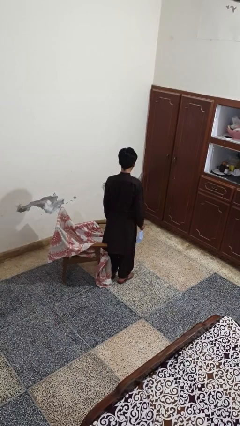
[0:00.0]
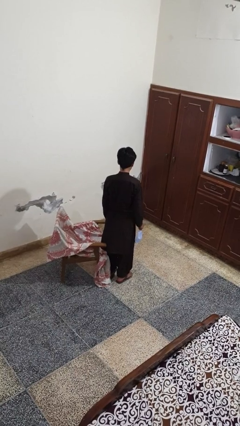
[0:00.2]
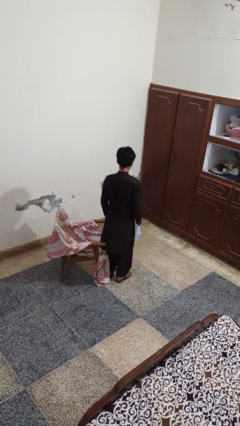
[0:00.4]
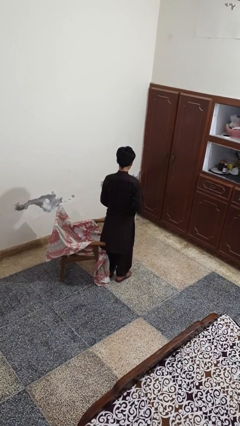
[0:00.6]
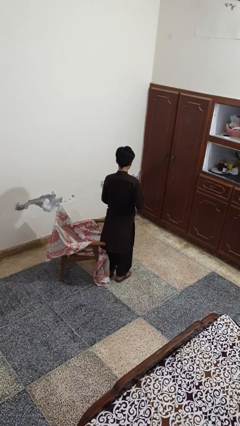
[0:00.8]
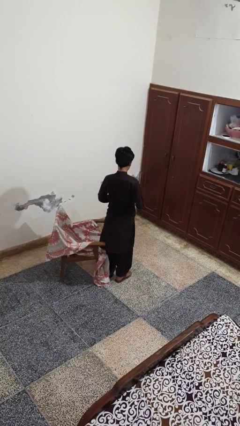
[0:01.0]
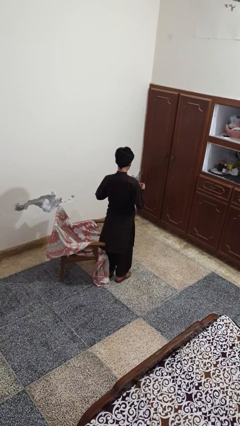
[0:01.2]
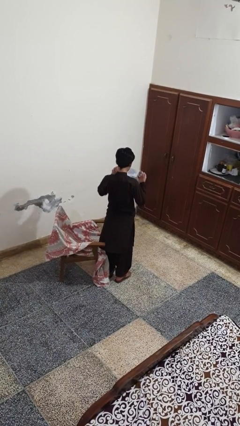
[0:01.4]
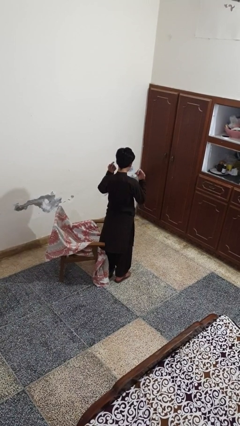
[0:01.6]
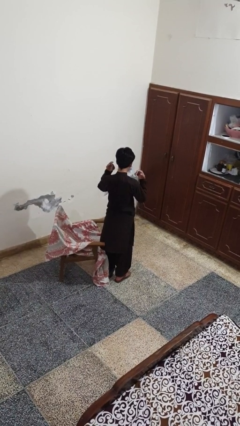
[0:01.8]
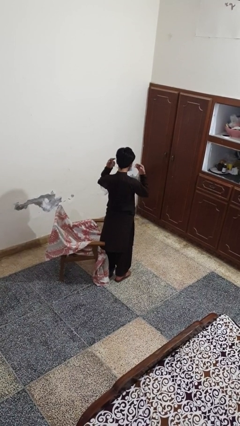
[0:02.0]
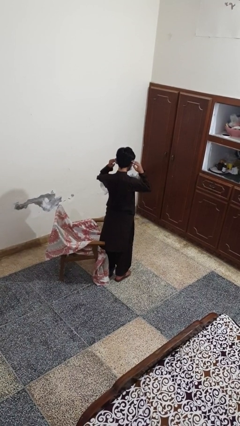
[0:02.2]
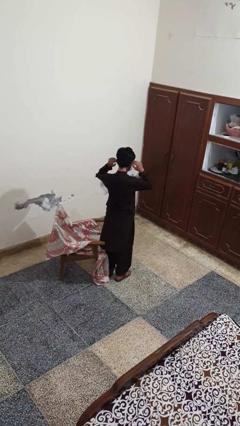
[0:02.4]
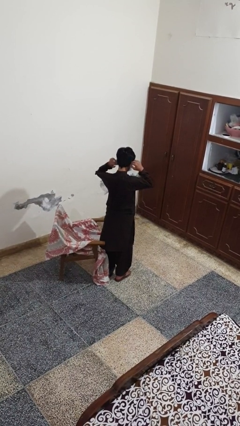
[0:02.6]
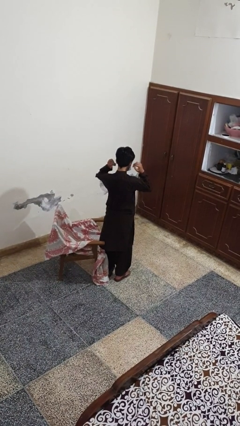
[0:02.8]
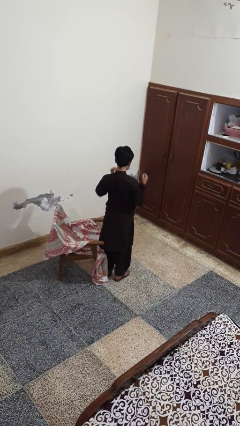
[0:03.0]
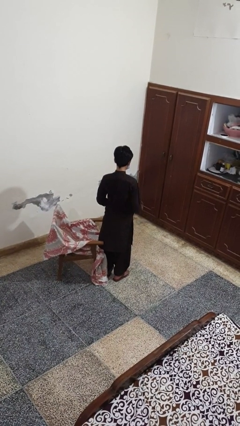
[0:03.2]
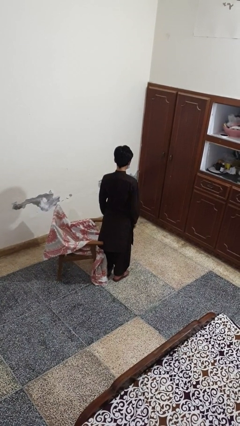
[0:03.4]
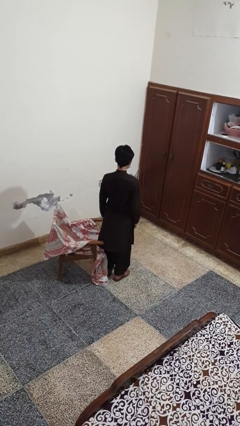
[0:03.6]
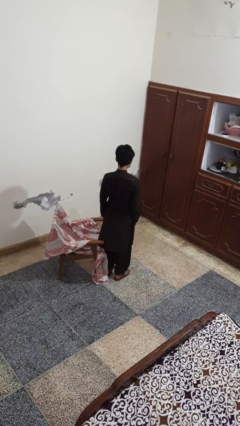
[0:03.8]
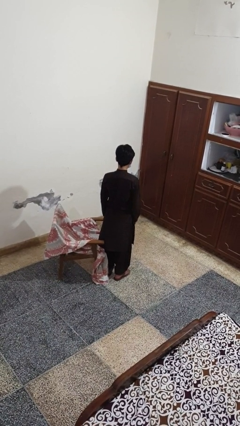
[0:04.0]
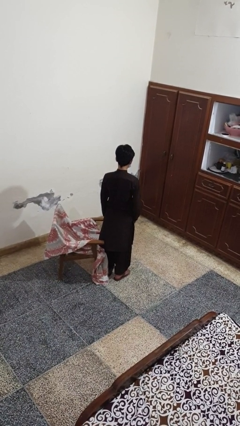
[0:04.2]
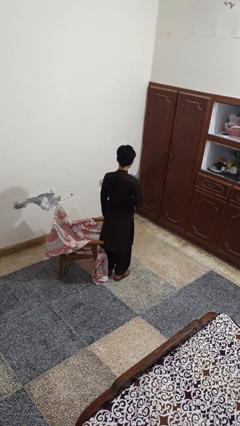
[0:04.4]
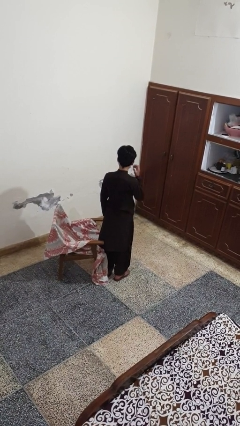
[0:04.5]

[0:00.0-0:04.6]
person puts on facemask

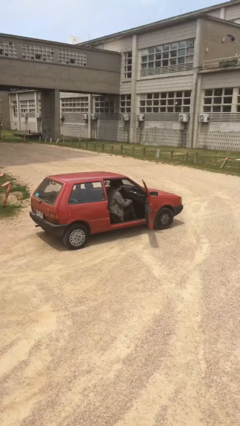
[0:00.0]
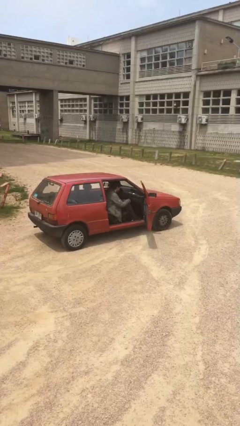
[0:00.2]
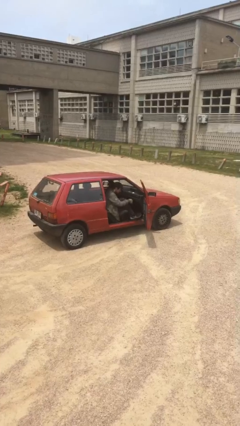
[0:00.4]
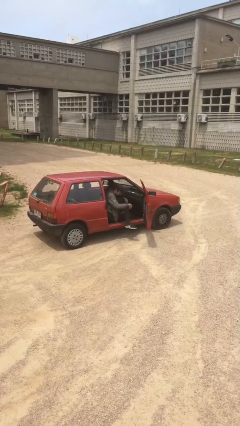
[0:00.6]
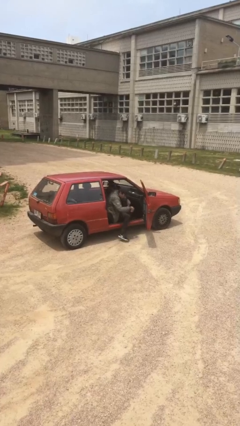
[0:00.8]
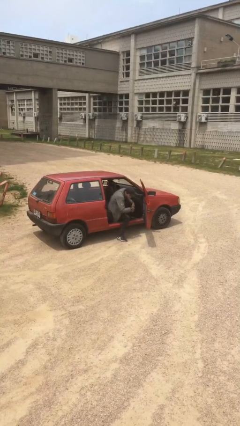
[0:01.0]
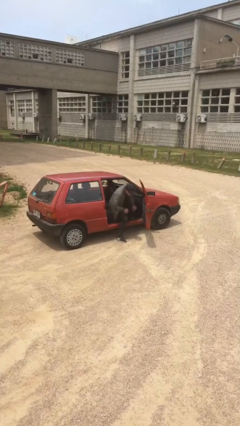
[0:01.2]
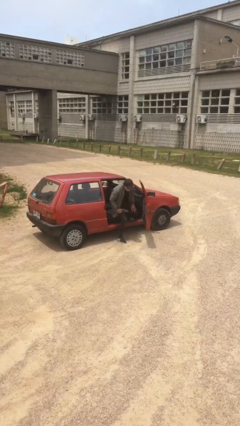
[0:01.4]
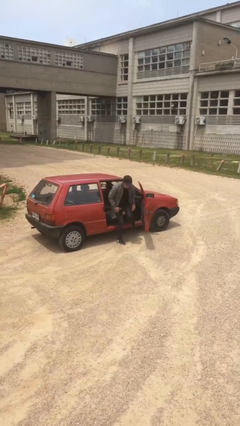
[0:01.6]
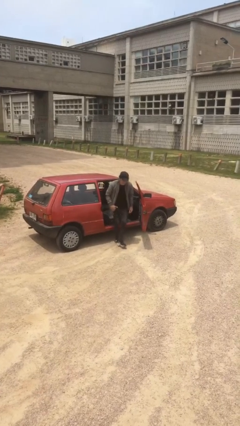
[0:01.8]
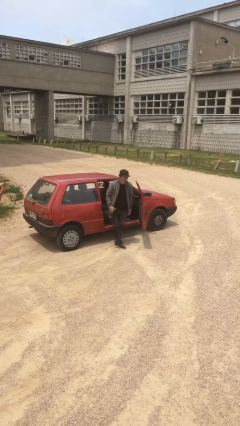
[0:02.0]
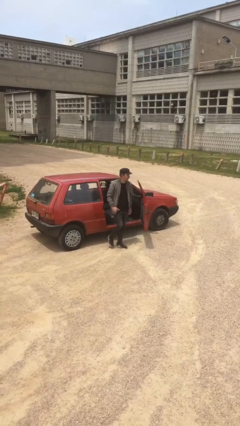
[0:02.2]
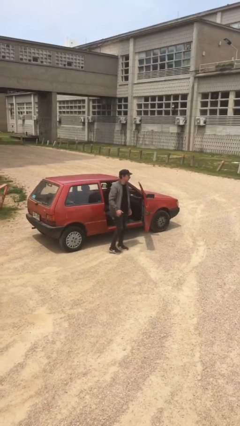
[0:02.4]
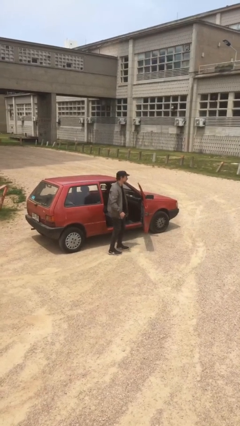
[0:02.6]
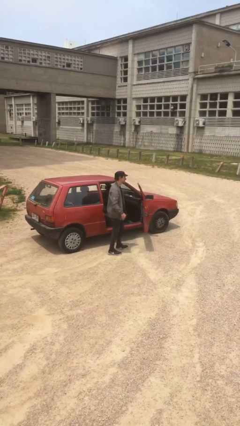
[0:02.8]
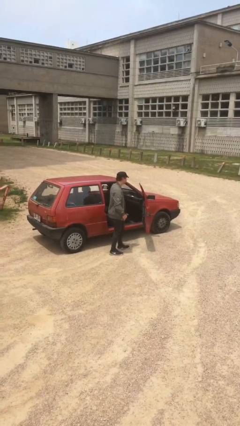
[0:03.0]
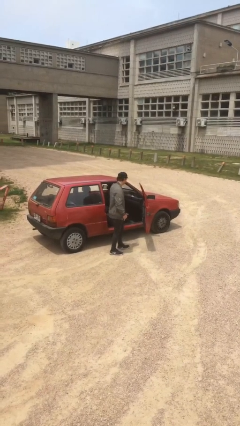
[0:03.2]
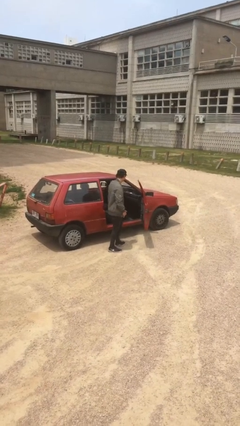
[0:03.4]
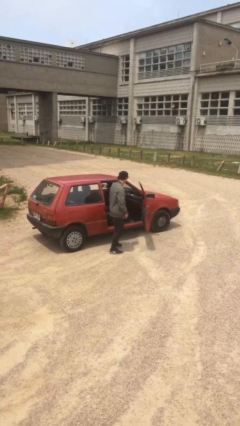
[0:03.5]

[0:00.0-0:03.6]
person exits car

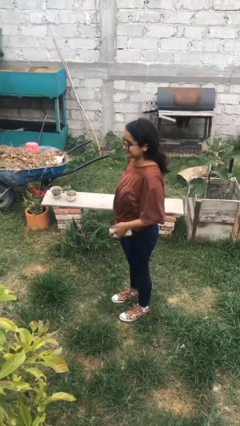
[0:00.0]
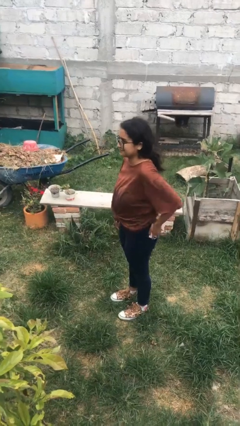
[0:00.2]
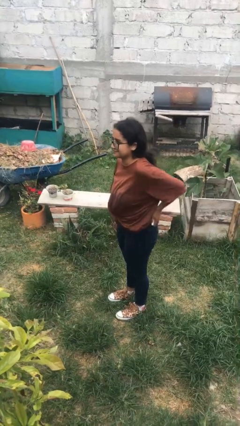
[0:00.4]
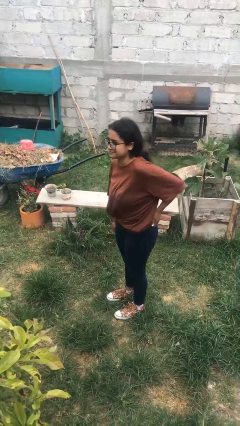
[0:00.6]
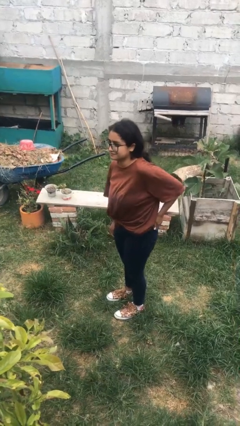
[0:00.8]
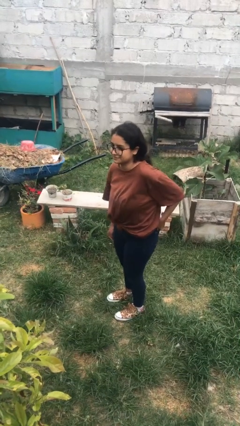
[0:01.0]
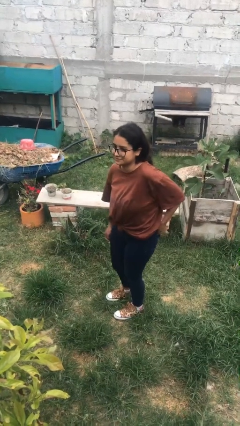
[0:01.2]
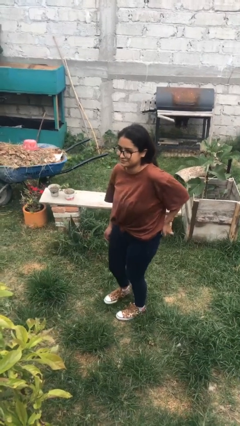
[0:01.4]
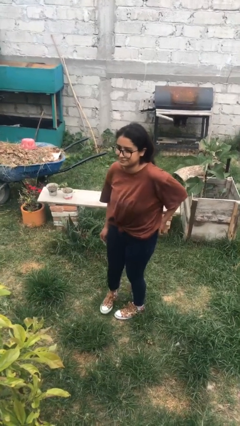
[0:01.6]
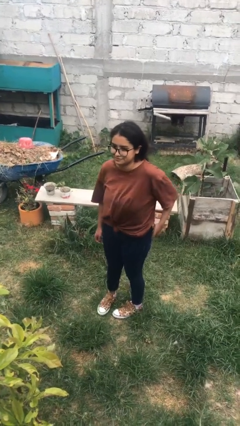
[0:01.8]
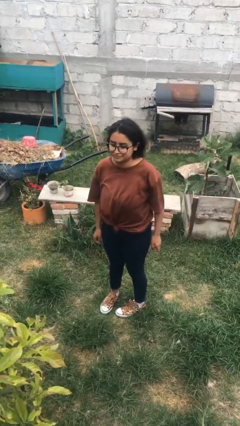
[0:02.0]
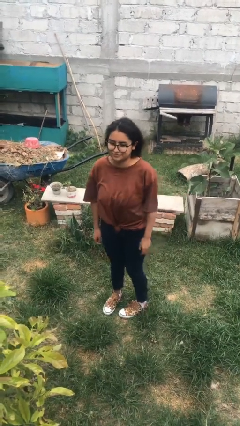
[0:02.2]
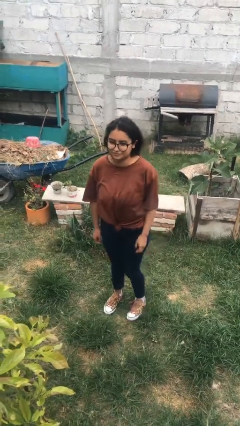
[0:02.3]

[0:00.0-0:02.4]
person puts phone into pocket

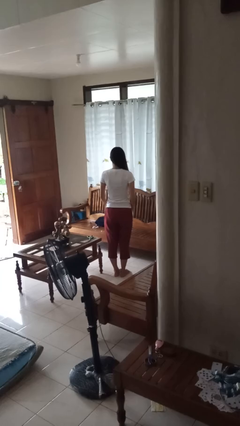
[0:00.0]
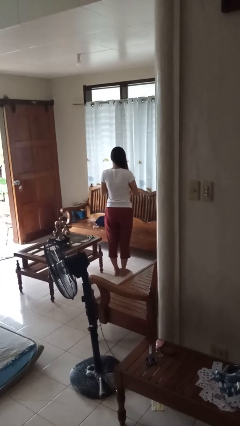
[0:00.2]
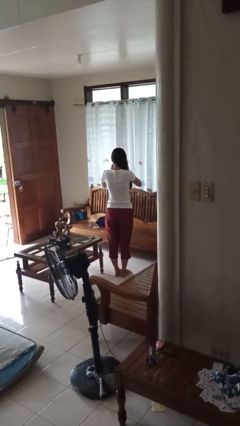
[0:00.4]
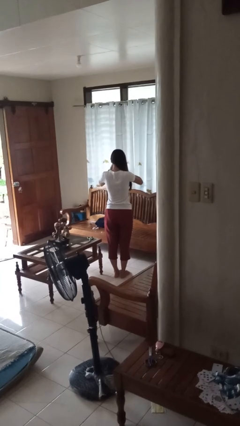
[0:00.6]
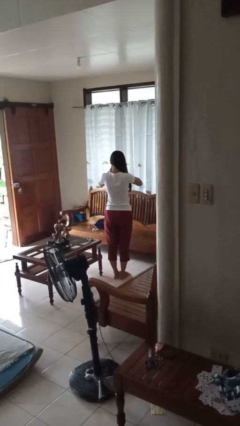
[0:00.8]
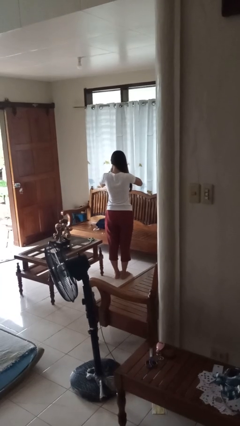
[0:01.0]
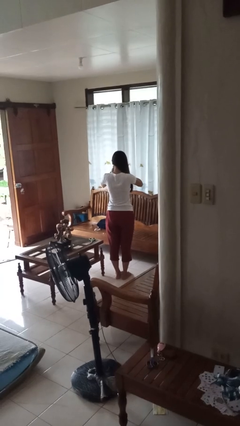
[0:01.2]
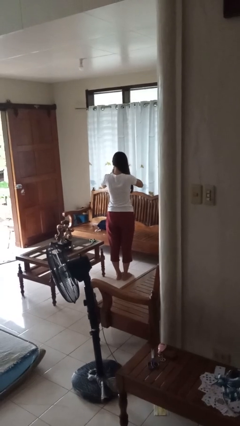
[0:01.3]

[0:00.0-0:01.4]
person covers face with hands

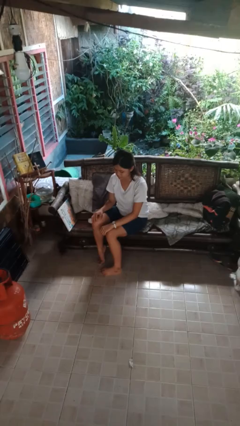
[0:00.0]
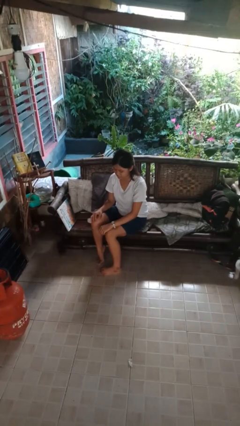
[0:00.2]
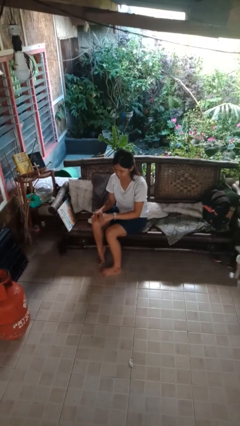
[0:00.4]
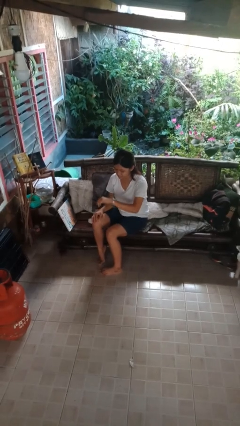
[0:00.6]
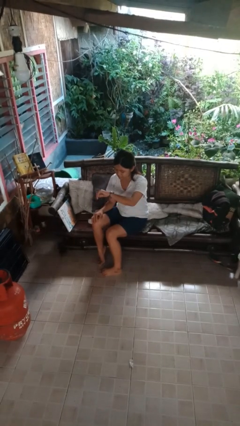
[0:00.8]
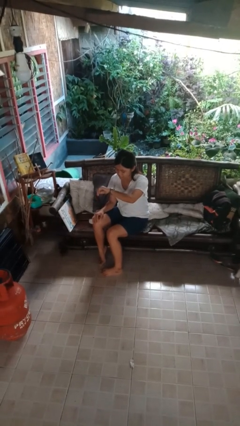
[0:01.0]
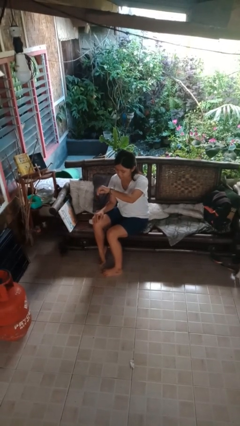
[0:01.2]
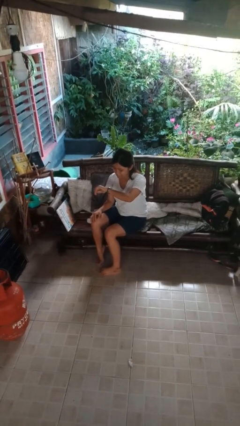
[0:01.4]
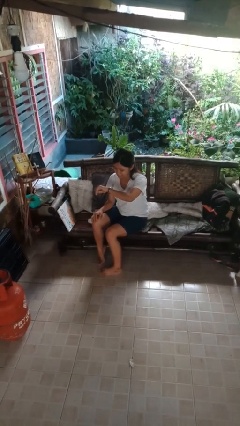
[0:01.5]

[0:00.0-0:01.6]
person looks at wristwatch

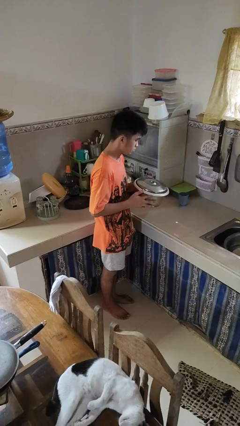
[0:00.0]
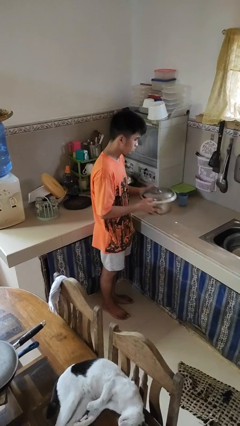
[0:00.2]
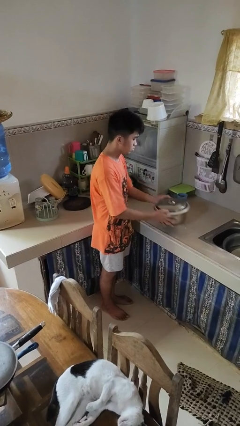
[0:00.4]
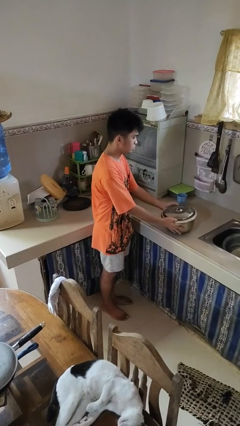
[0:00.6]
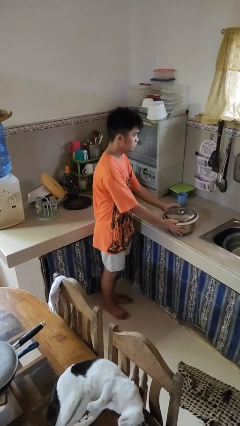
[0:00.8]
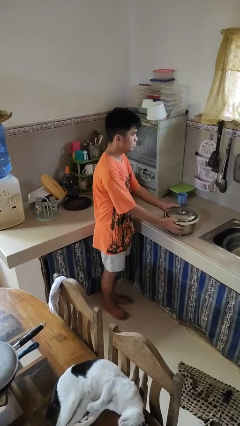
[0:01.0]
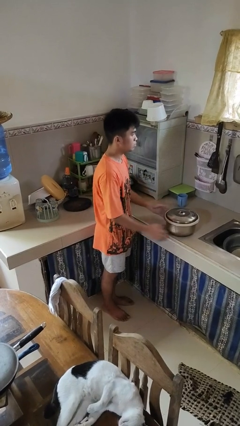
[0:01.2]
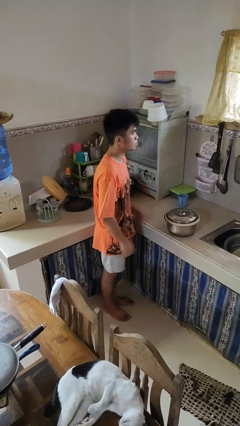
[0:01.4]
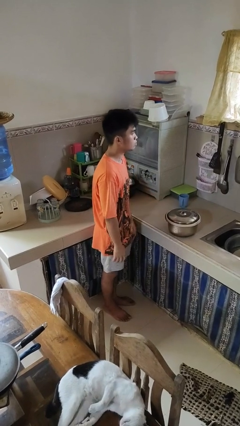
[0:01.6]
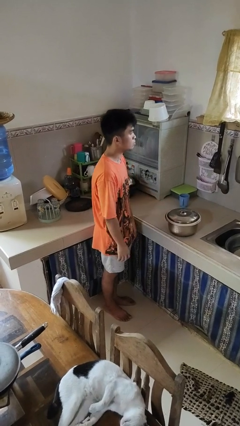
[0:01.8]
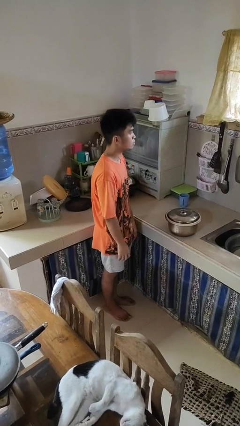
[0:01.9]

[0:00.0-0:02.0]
person puts down object on countertop

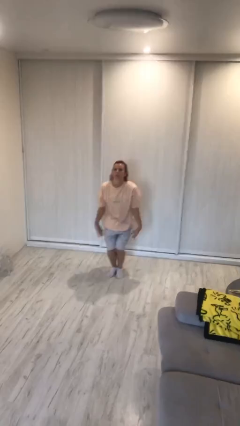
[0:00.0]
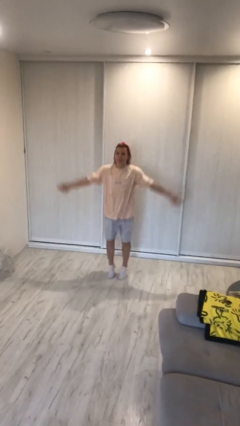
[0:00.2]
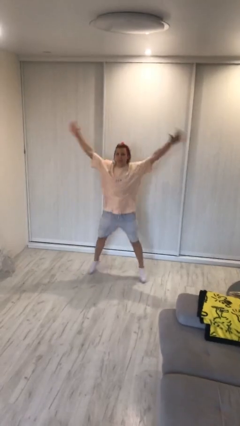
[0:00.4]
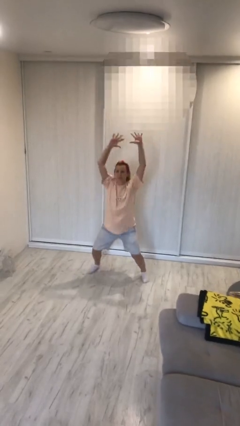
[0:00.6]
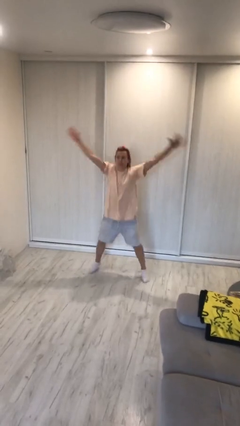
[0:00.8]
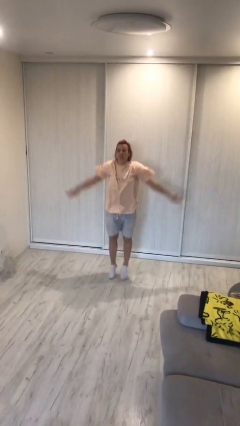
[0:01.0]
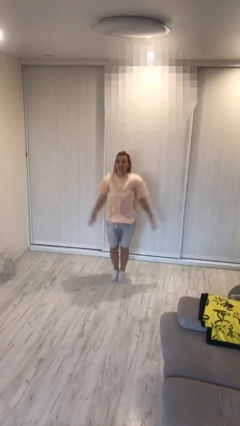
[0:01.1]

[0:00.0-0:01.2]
person exercises with jumping jacks

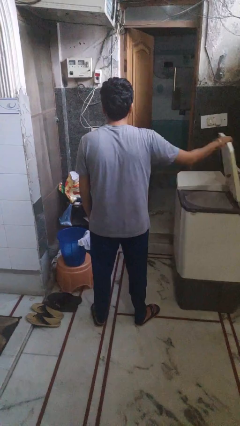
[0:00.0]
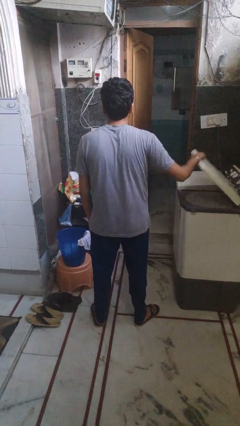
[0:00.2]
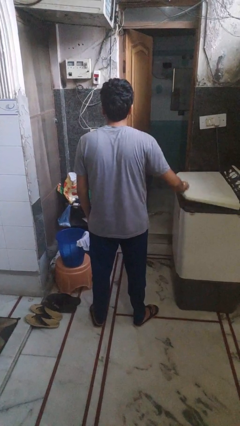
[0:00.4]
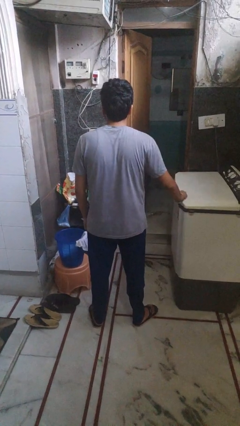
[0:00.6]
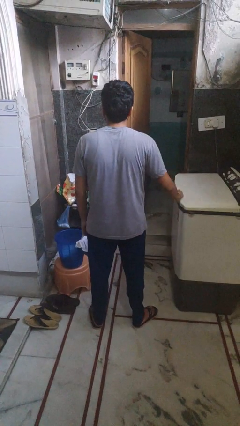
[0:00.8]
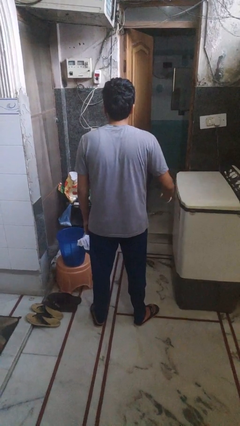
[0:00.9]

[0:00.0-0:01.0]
person closes clothes washer
